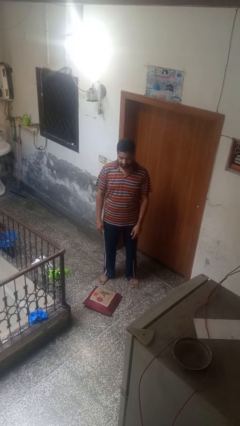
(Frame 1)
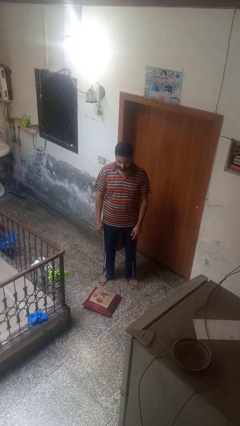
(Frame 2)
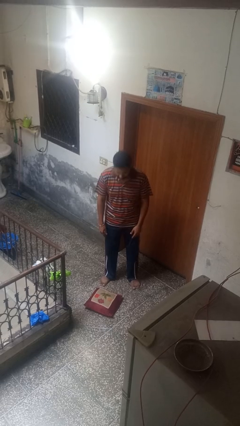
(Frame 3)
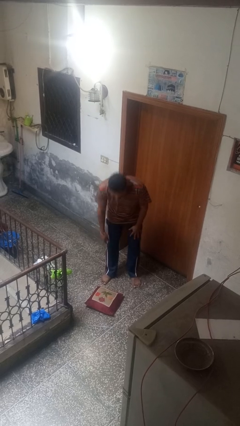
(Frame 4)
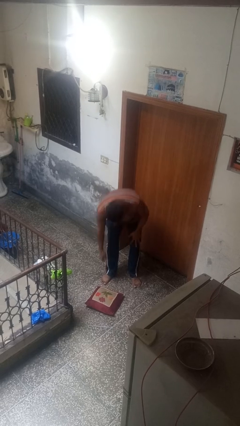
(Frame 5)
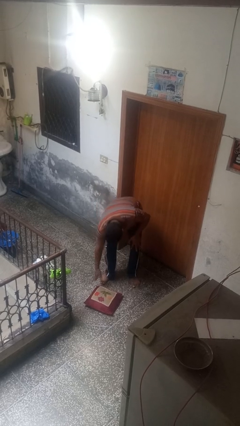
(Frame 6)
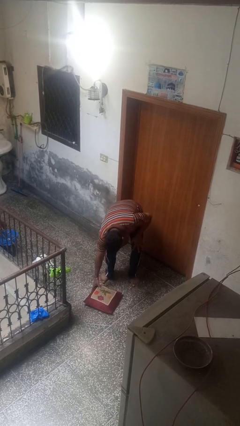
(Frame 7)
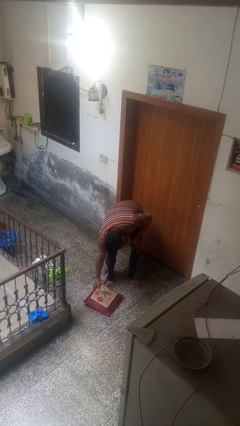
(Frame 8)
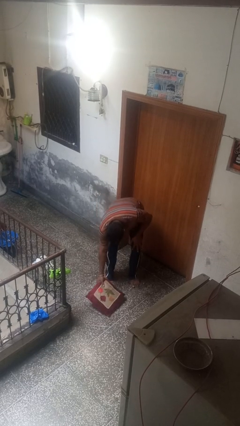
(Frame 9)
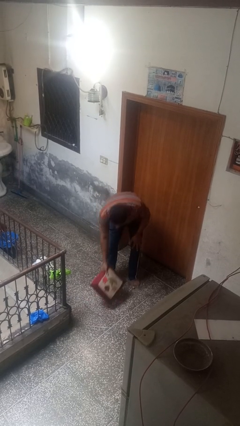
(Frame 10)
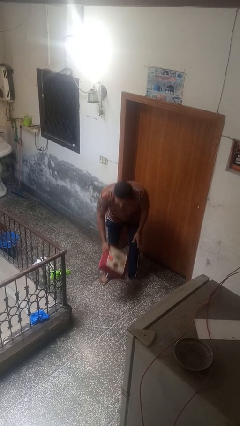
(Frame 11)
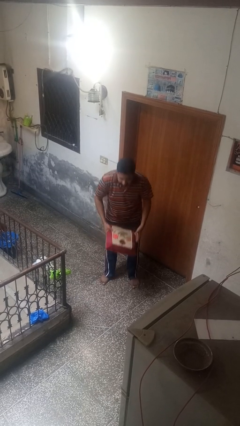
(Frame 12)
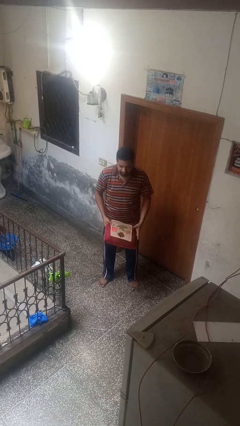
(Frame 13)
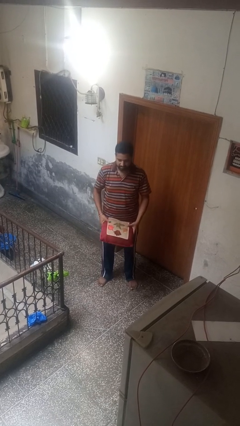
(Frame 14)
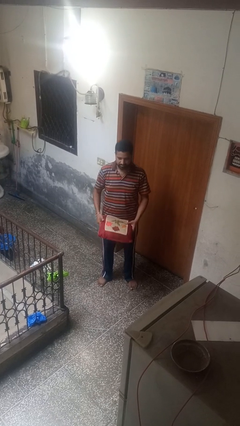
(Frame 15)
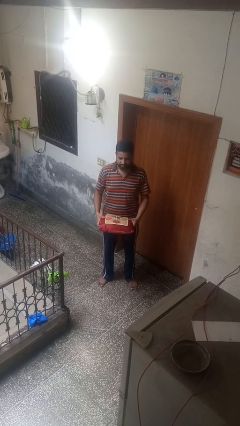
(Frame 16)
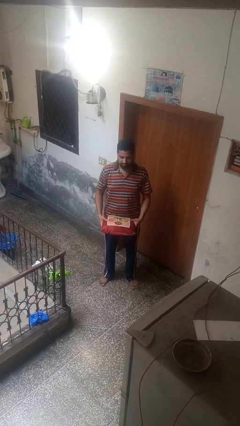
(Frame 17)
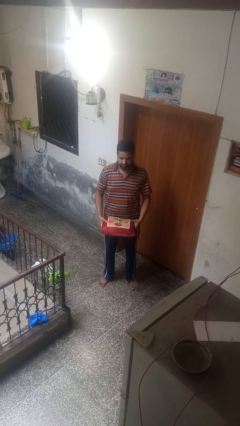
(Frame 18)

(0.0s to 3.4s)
person picks up object from floor

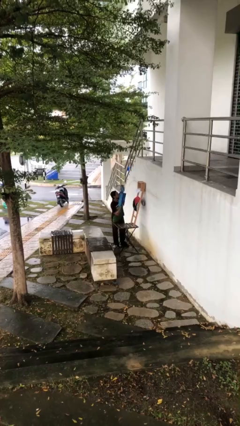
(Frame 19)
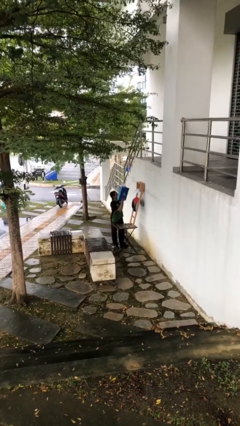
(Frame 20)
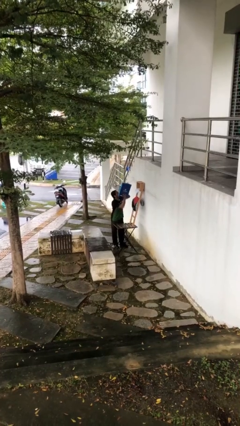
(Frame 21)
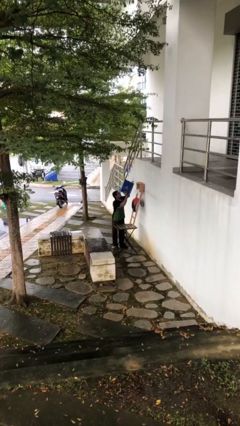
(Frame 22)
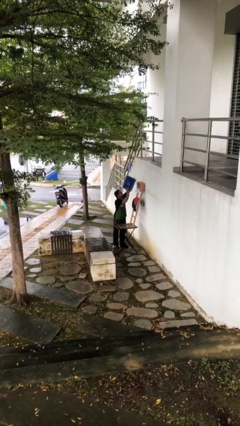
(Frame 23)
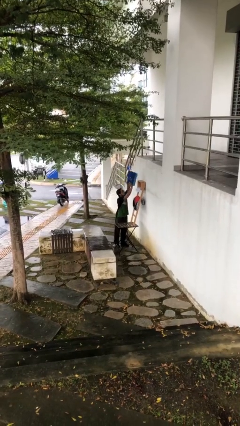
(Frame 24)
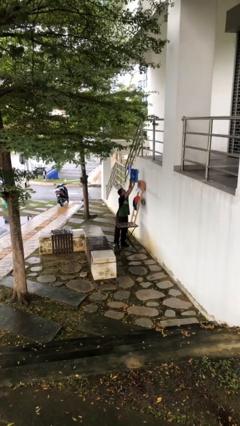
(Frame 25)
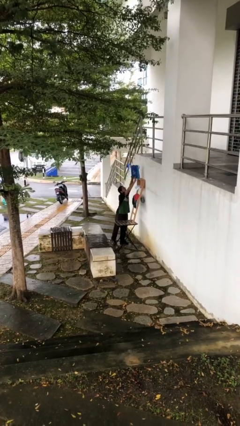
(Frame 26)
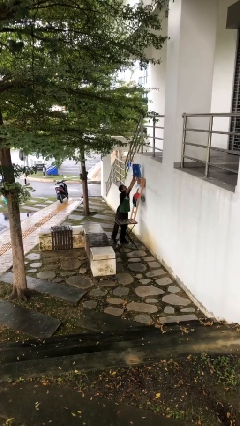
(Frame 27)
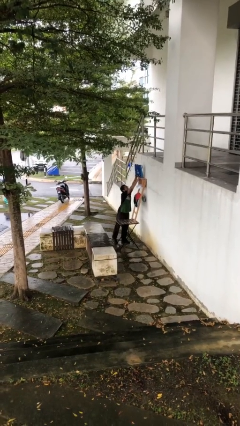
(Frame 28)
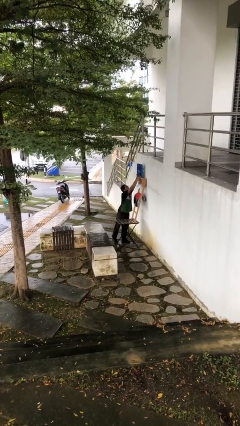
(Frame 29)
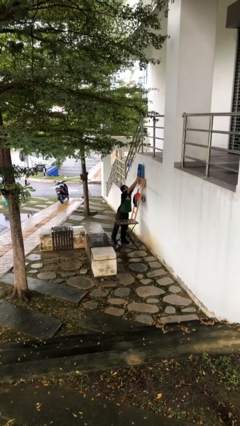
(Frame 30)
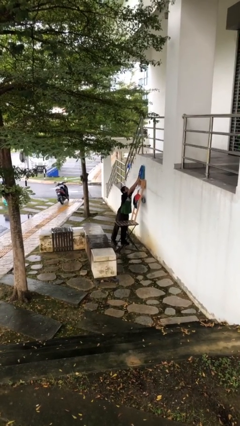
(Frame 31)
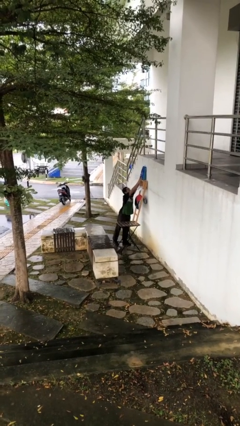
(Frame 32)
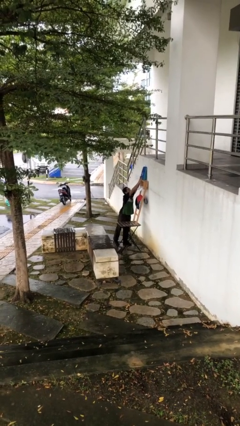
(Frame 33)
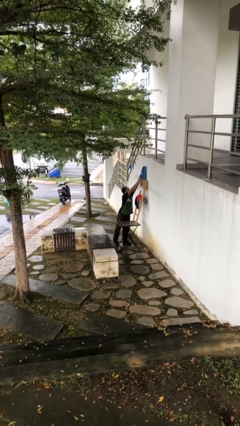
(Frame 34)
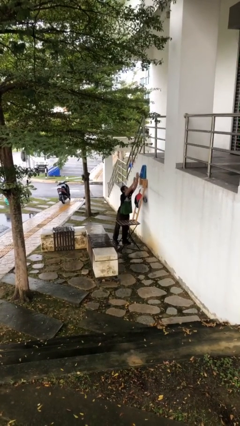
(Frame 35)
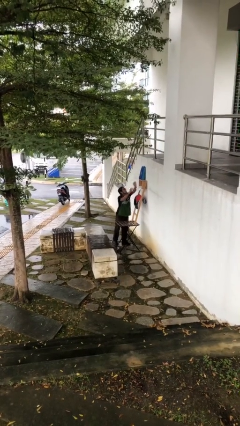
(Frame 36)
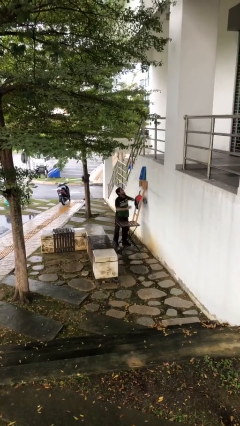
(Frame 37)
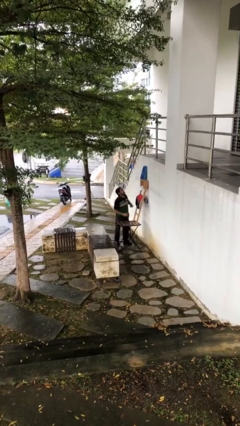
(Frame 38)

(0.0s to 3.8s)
person puts down object on shelf

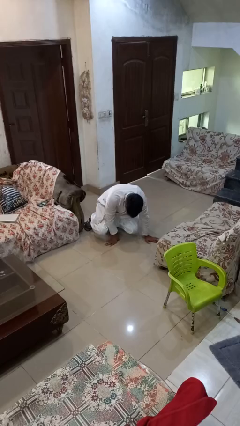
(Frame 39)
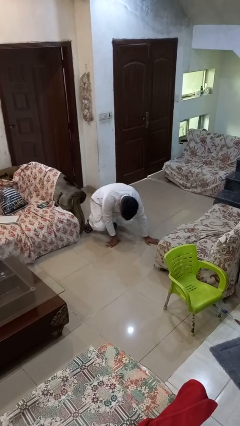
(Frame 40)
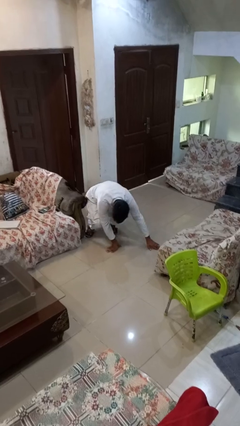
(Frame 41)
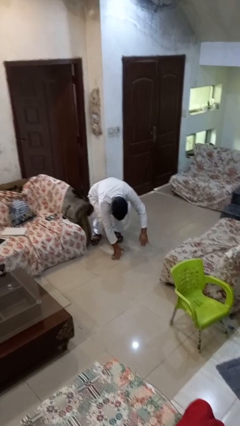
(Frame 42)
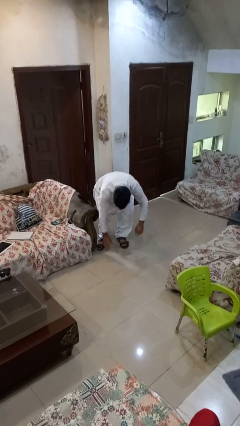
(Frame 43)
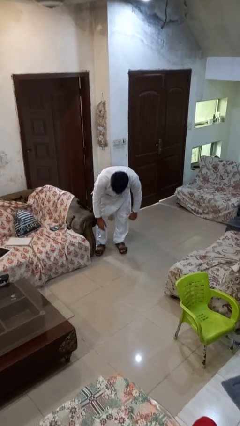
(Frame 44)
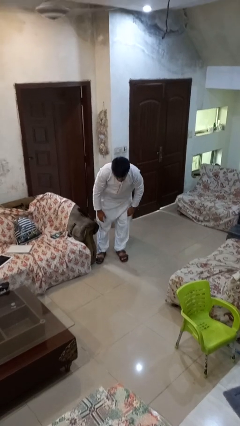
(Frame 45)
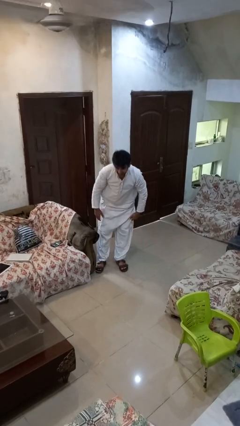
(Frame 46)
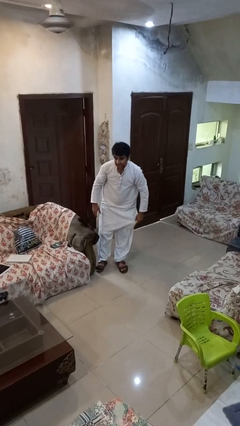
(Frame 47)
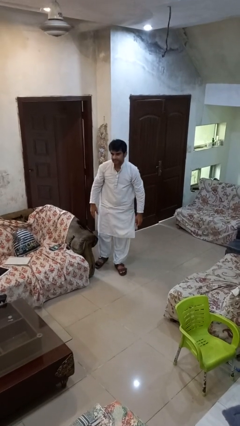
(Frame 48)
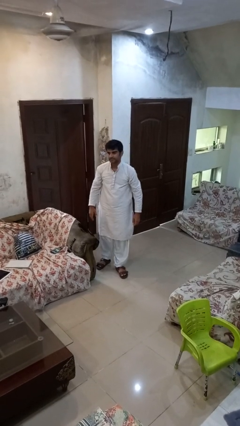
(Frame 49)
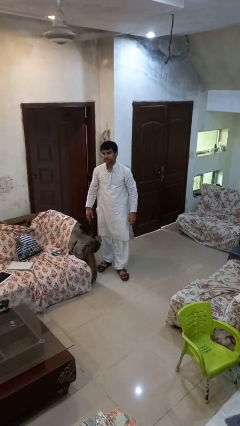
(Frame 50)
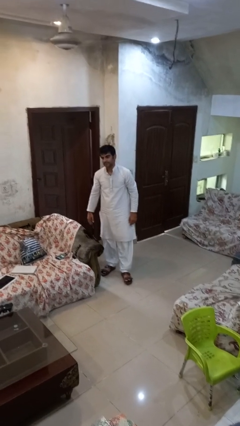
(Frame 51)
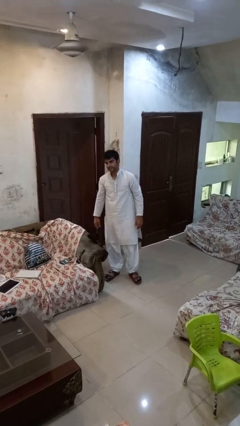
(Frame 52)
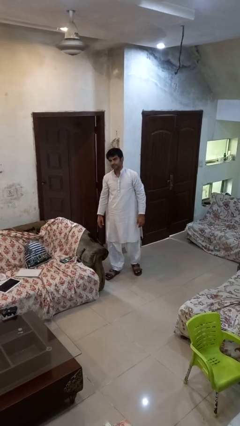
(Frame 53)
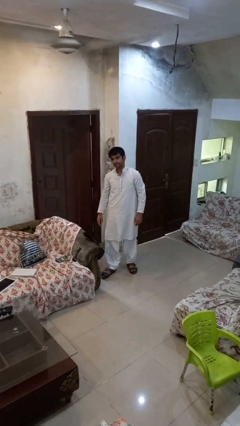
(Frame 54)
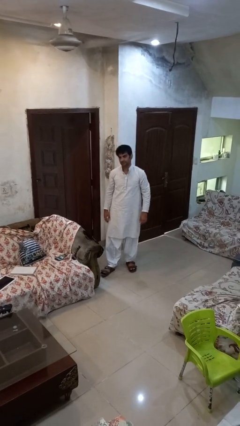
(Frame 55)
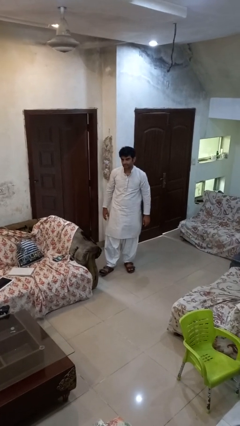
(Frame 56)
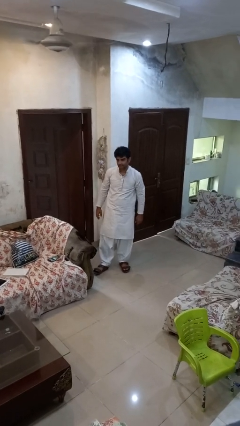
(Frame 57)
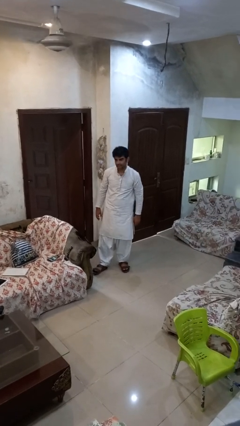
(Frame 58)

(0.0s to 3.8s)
person stands up from floor

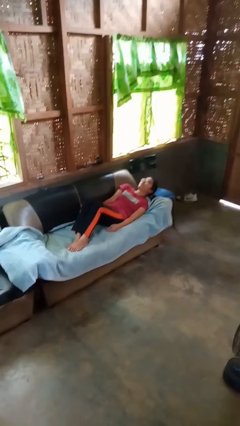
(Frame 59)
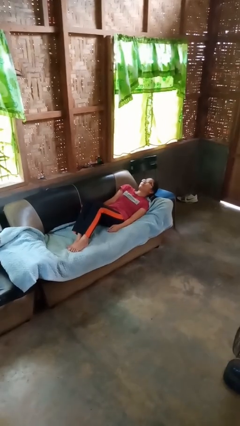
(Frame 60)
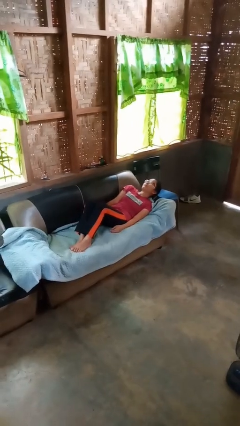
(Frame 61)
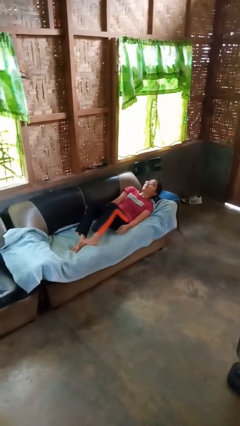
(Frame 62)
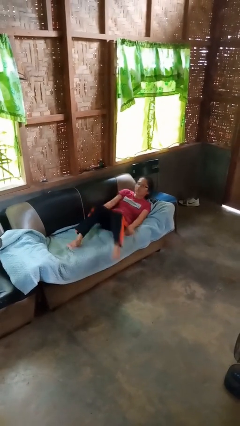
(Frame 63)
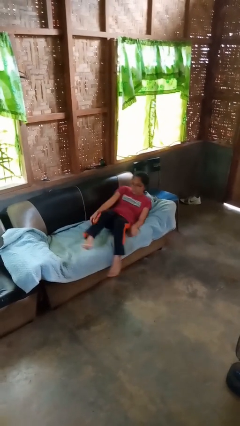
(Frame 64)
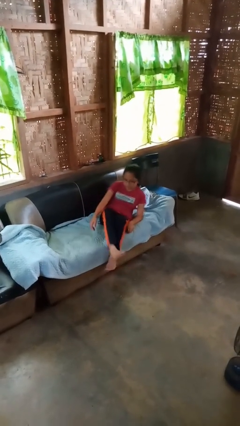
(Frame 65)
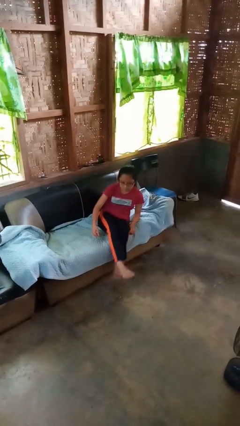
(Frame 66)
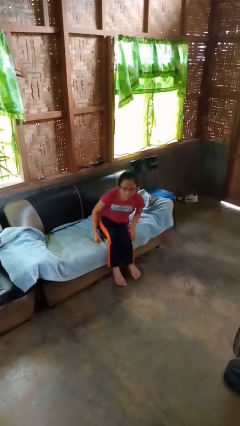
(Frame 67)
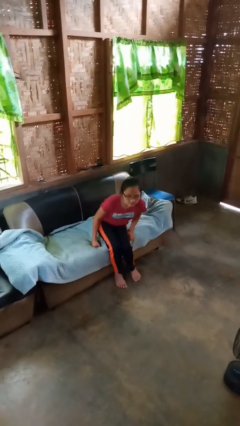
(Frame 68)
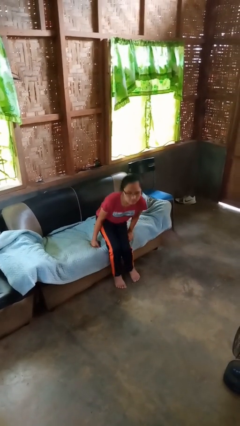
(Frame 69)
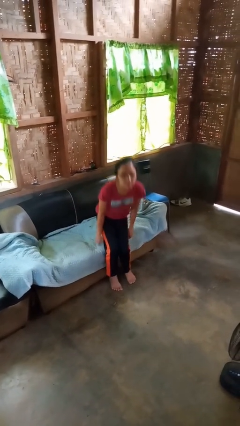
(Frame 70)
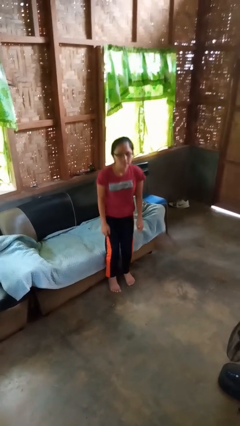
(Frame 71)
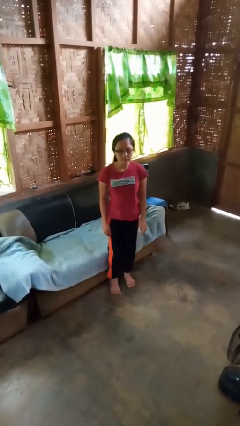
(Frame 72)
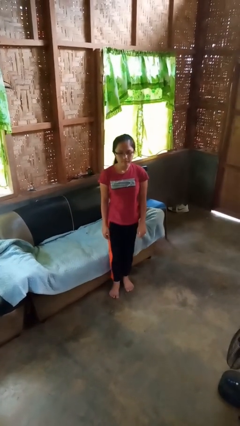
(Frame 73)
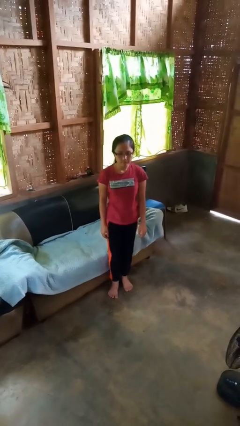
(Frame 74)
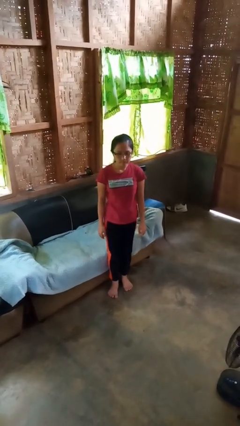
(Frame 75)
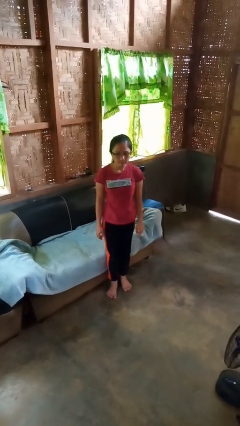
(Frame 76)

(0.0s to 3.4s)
person stands up

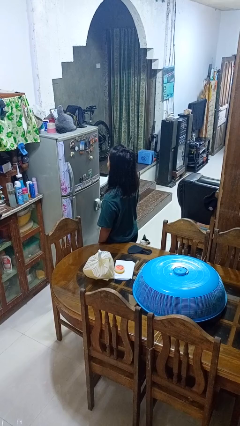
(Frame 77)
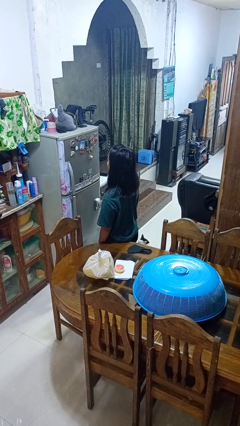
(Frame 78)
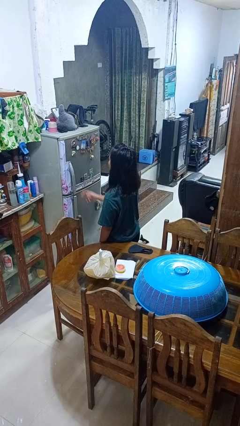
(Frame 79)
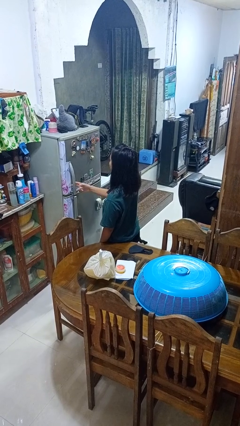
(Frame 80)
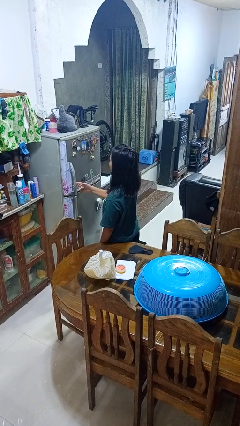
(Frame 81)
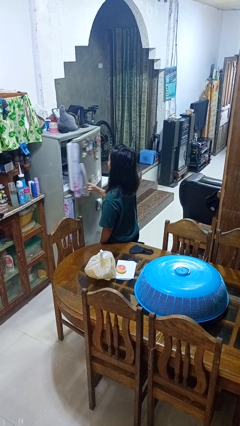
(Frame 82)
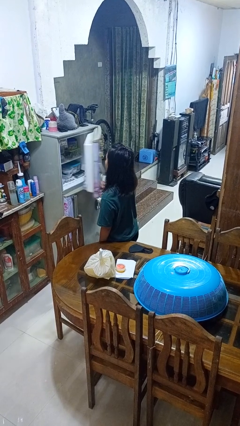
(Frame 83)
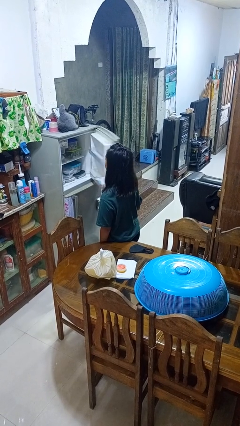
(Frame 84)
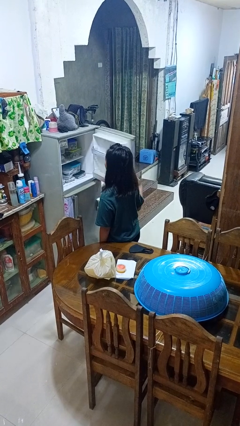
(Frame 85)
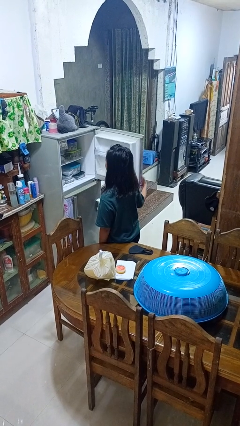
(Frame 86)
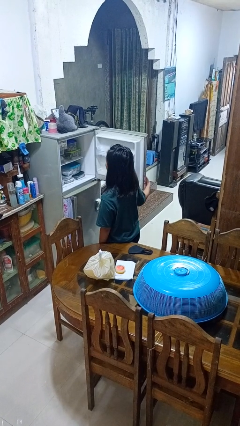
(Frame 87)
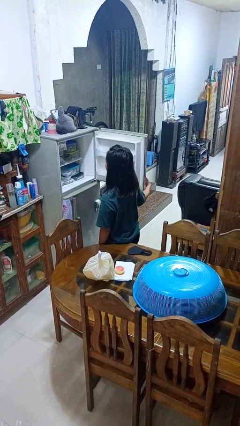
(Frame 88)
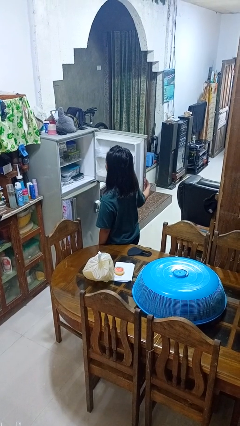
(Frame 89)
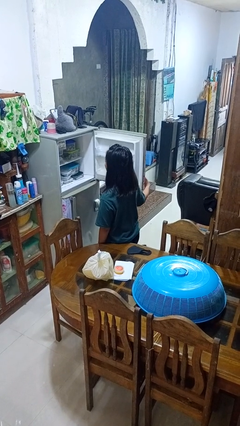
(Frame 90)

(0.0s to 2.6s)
person opens refrigerator
